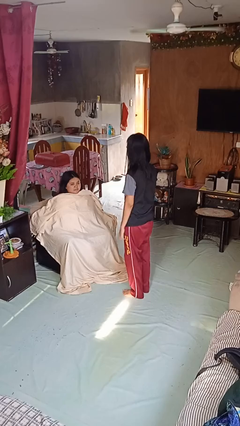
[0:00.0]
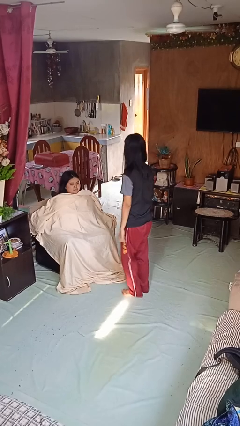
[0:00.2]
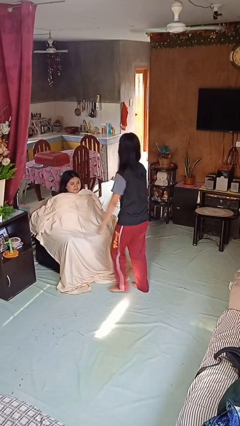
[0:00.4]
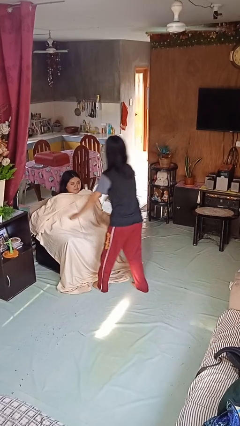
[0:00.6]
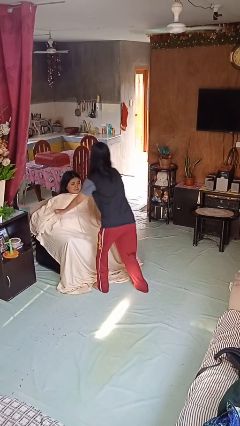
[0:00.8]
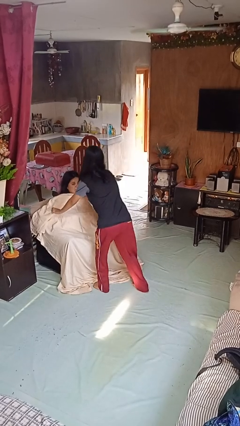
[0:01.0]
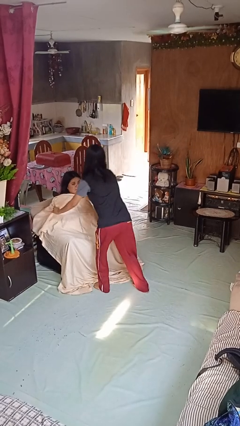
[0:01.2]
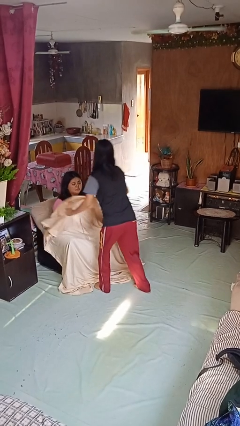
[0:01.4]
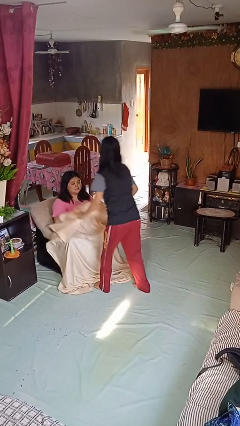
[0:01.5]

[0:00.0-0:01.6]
person uncovers friend with blanket

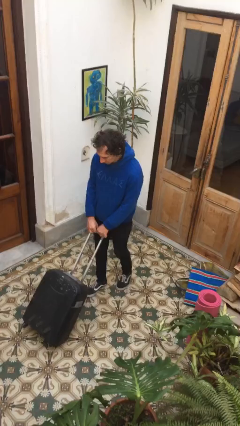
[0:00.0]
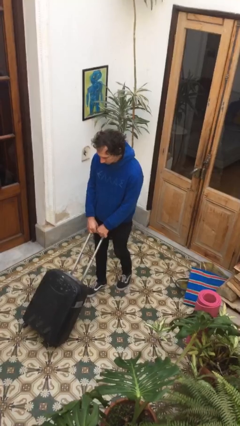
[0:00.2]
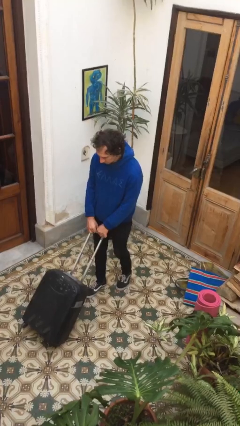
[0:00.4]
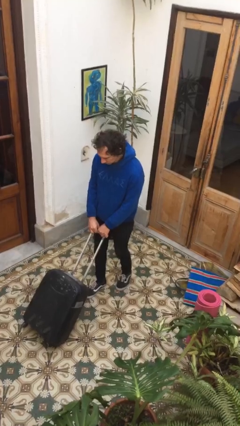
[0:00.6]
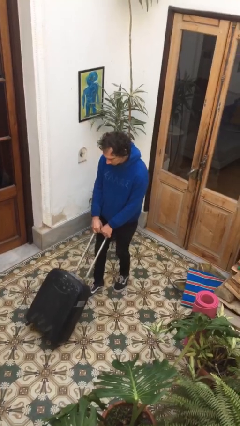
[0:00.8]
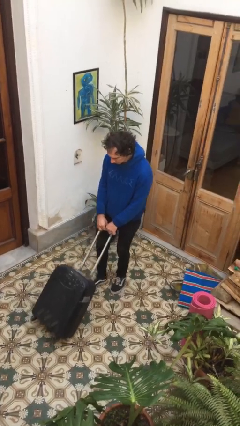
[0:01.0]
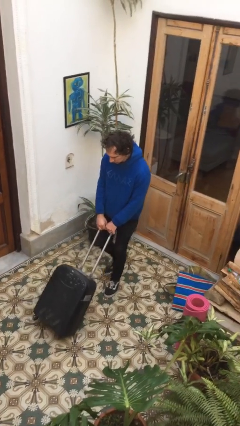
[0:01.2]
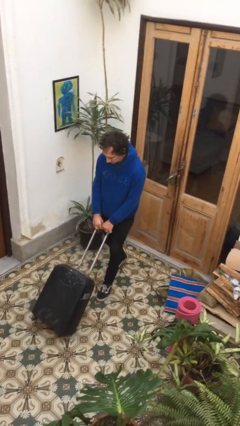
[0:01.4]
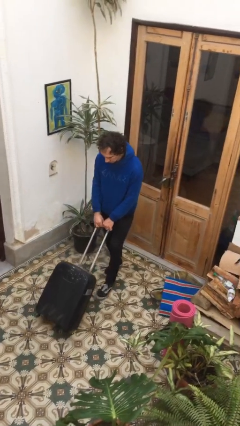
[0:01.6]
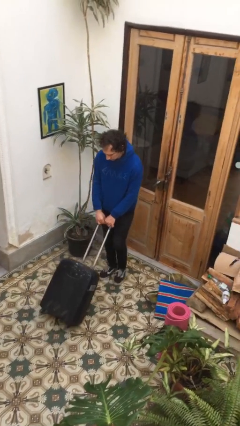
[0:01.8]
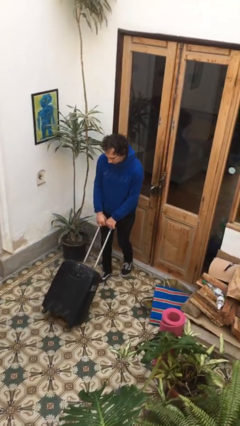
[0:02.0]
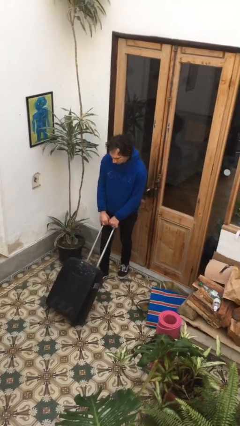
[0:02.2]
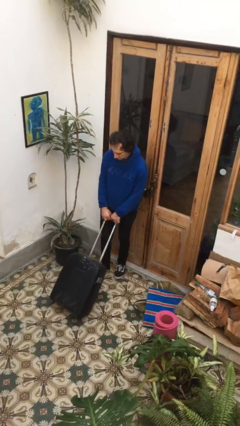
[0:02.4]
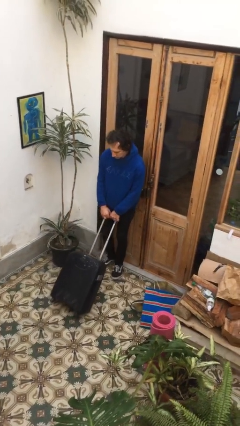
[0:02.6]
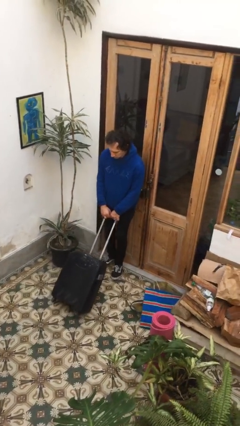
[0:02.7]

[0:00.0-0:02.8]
person pulls wheeled cart

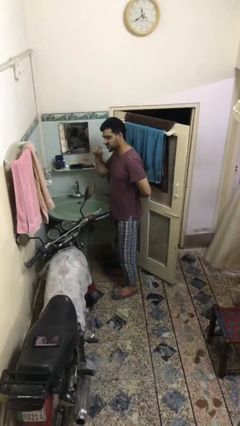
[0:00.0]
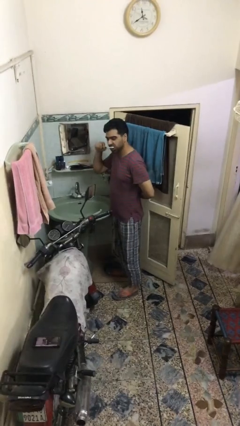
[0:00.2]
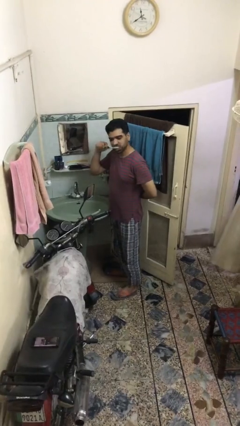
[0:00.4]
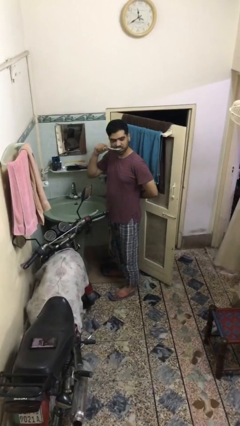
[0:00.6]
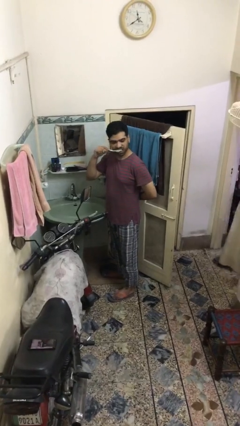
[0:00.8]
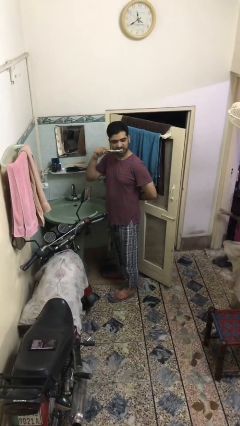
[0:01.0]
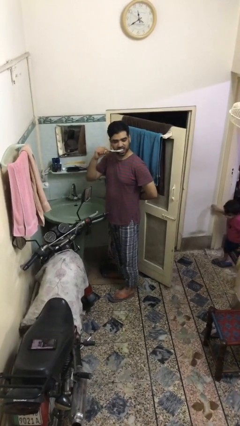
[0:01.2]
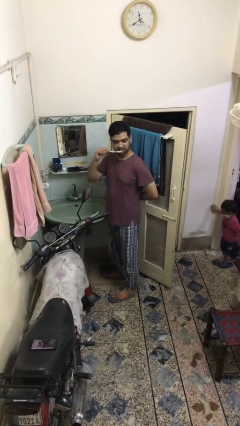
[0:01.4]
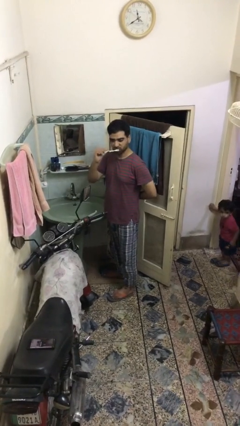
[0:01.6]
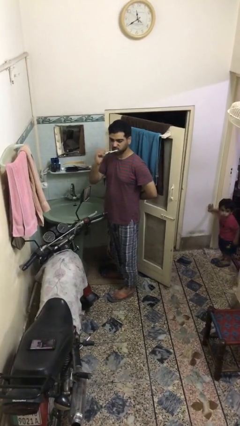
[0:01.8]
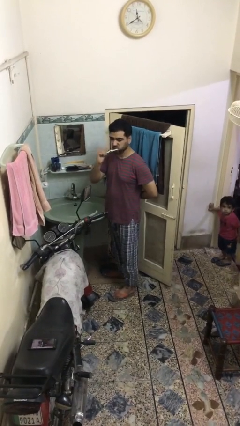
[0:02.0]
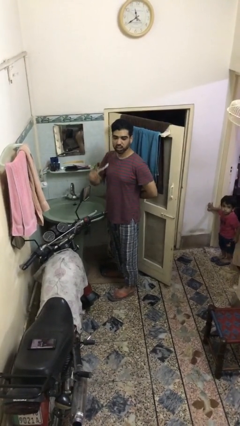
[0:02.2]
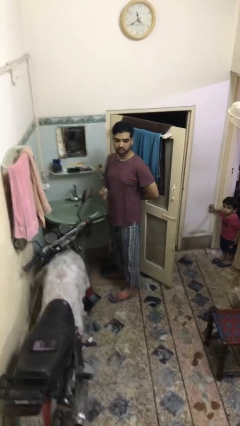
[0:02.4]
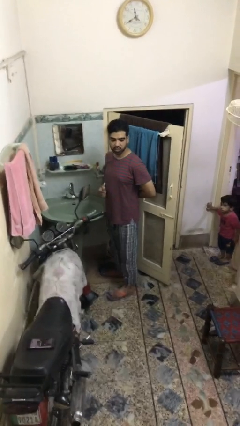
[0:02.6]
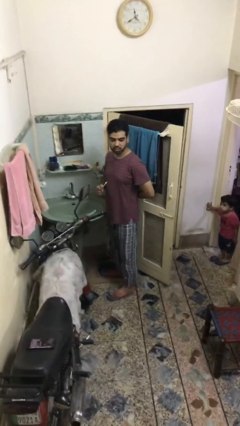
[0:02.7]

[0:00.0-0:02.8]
person brushes teeth

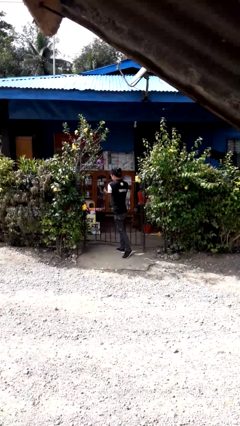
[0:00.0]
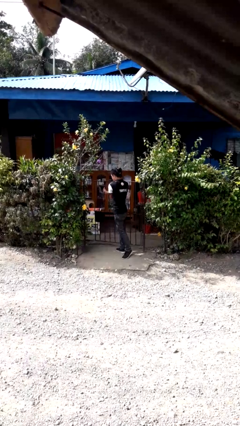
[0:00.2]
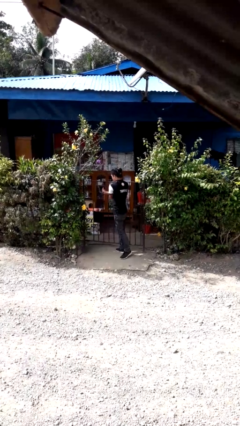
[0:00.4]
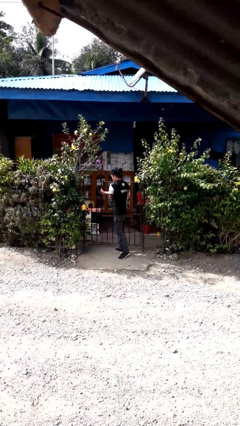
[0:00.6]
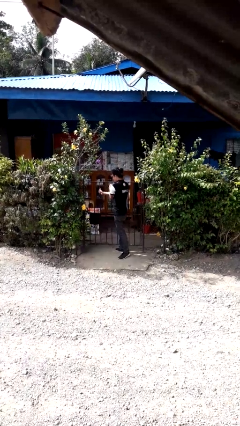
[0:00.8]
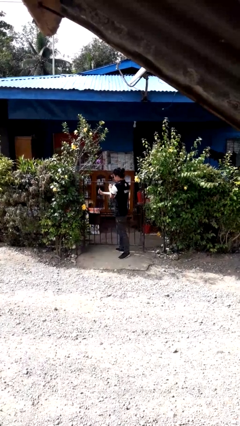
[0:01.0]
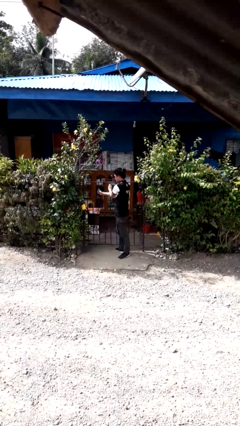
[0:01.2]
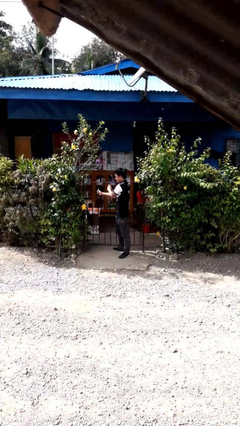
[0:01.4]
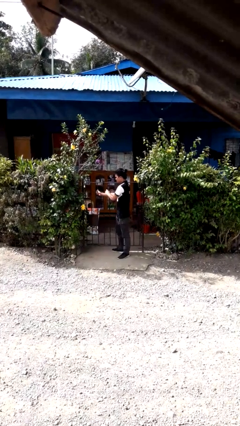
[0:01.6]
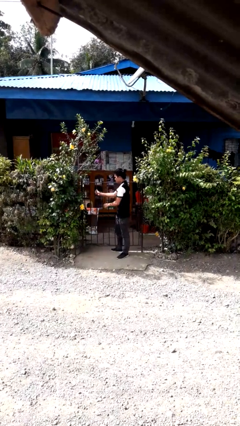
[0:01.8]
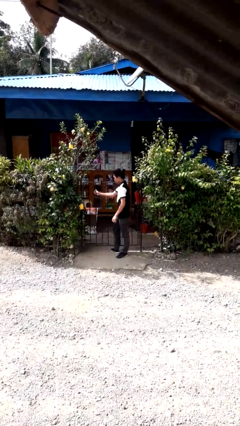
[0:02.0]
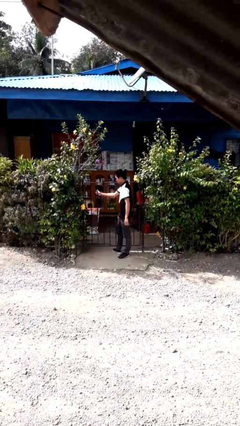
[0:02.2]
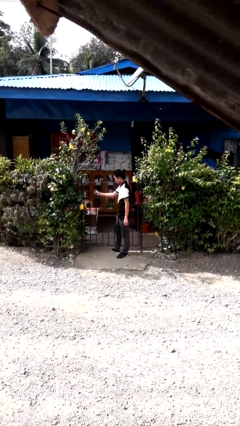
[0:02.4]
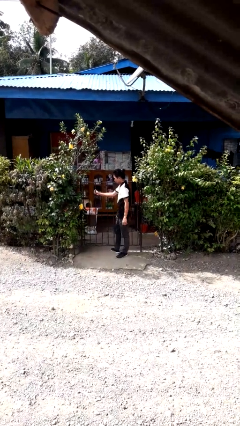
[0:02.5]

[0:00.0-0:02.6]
person closes gate

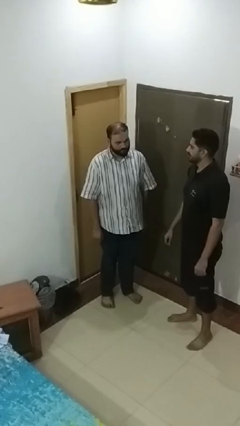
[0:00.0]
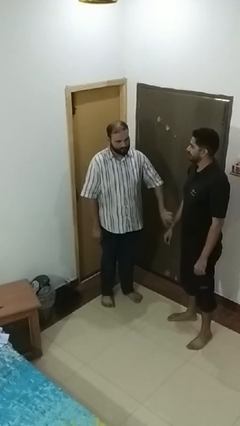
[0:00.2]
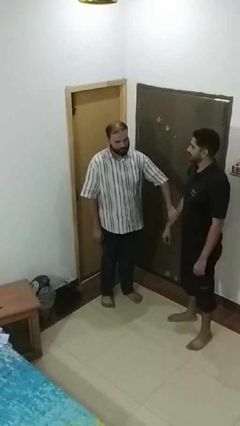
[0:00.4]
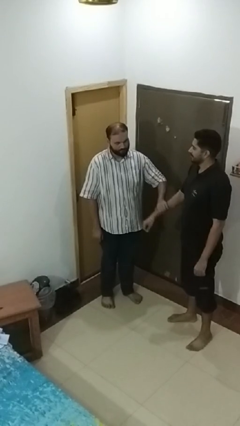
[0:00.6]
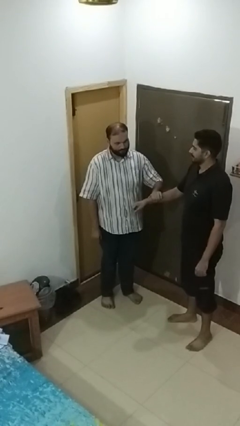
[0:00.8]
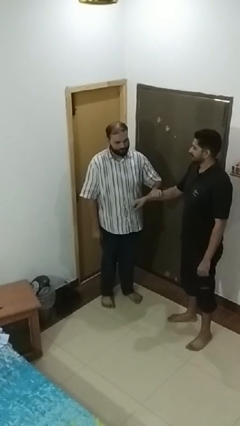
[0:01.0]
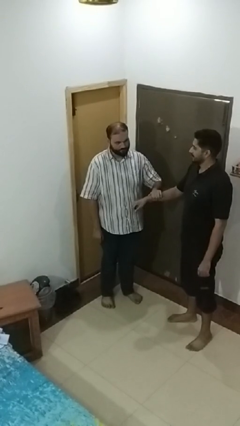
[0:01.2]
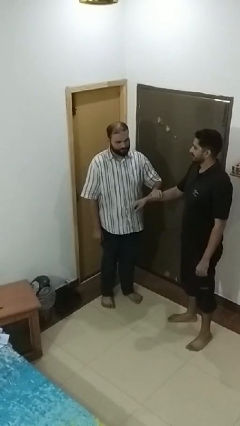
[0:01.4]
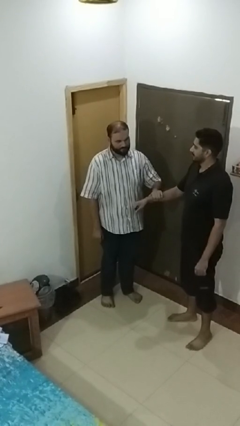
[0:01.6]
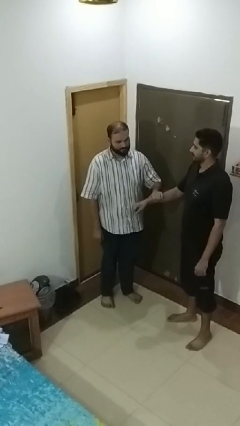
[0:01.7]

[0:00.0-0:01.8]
person grabs person by forearm

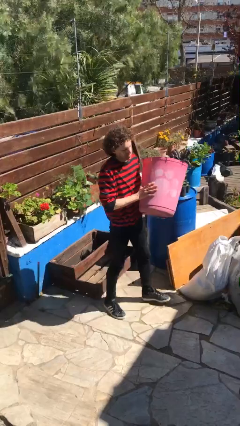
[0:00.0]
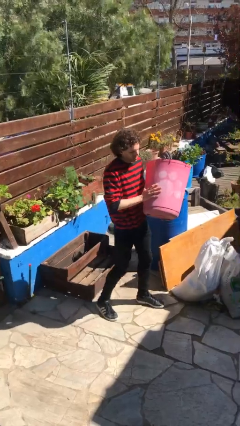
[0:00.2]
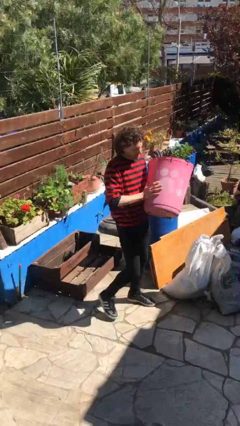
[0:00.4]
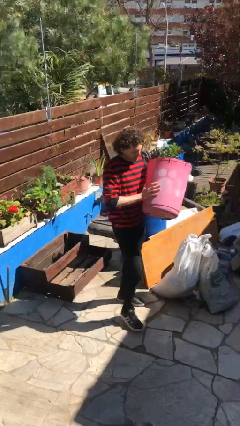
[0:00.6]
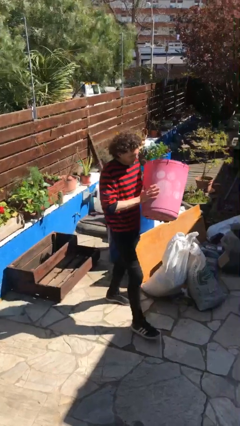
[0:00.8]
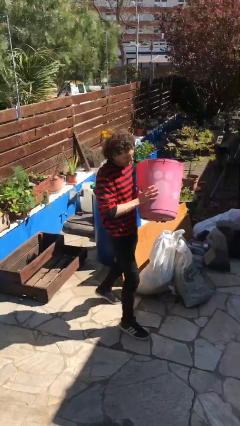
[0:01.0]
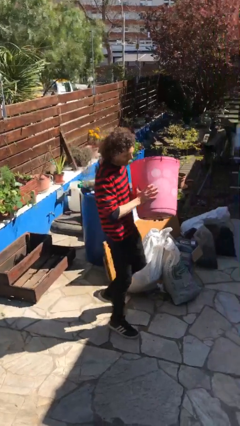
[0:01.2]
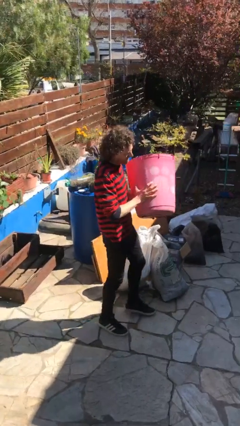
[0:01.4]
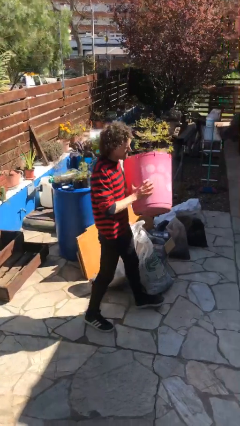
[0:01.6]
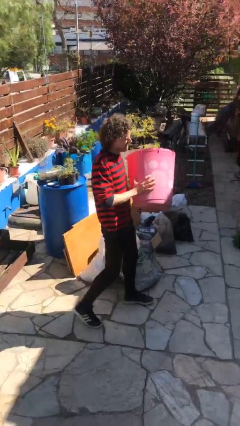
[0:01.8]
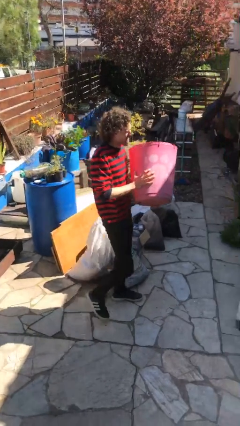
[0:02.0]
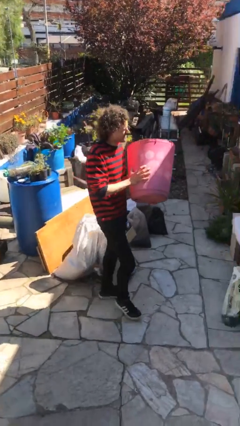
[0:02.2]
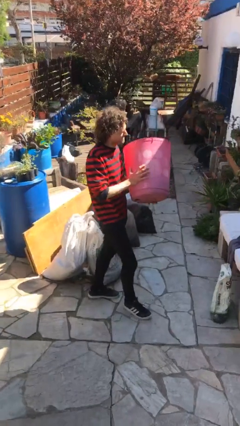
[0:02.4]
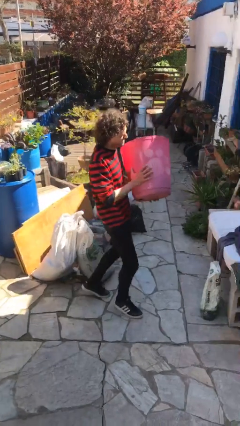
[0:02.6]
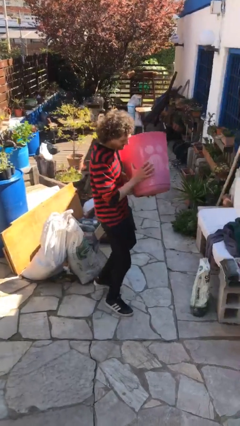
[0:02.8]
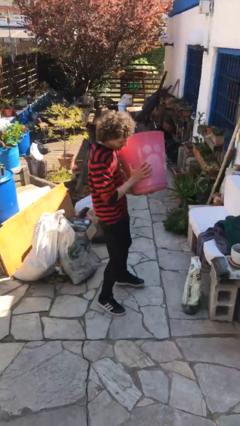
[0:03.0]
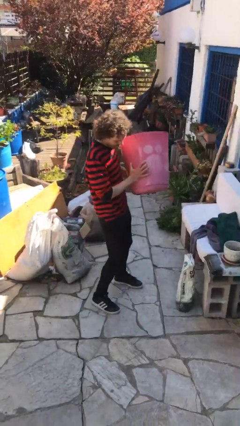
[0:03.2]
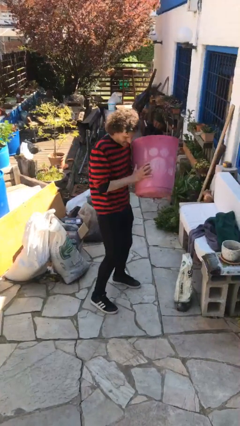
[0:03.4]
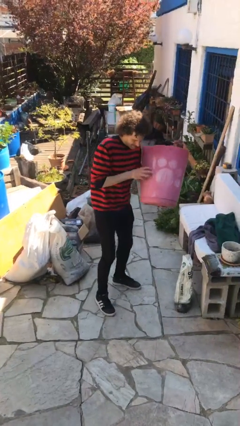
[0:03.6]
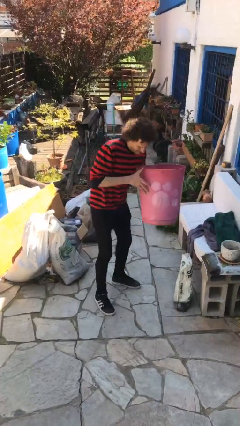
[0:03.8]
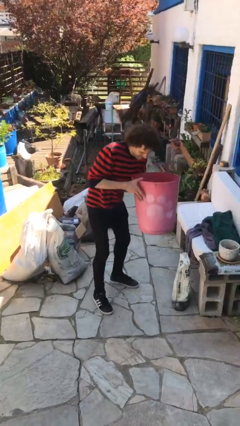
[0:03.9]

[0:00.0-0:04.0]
person carries heavy object

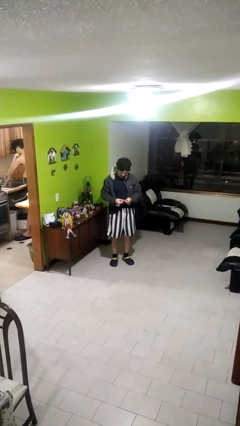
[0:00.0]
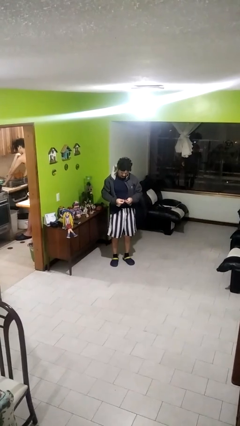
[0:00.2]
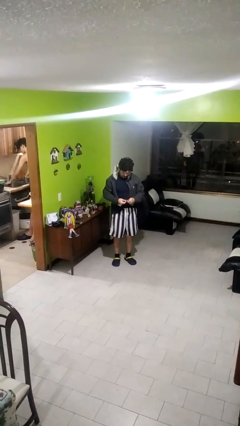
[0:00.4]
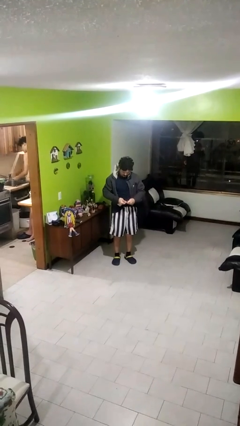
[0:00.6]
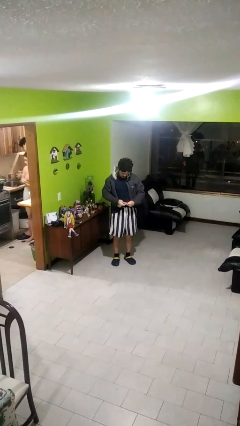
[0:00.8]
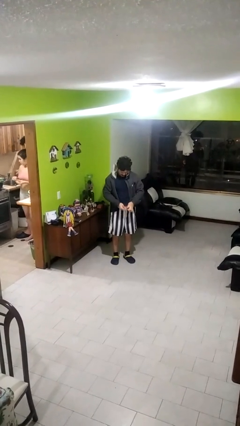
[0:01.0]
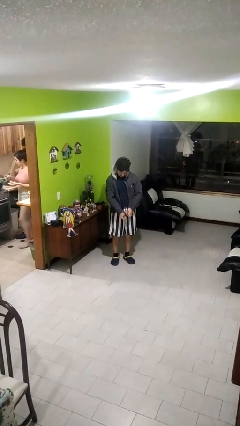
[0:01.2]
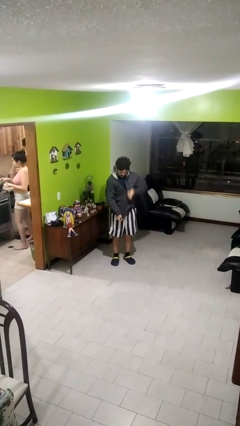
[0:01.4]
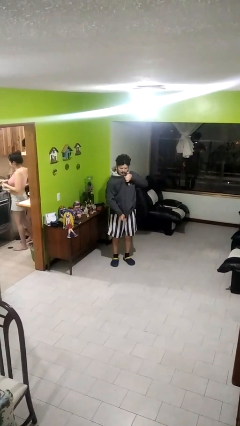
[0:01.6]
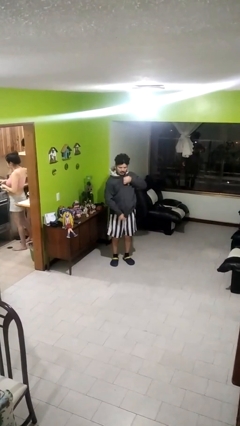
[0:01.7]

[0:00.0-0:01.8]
person zips up jacket
